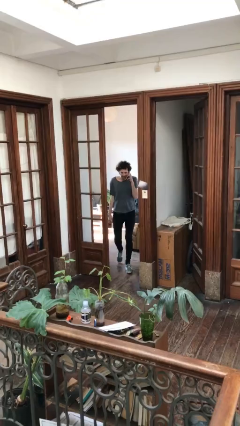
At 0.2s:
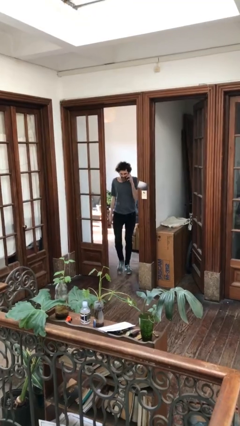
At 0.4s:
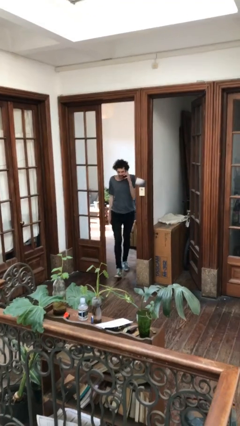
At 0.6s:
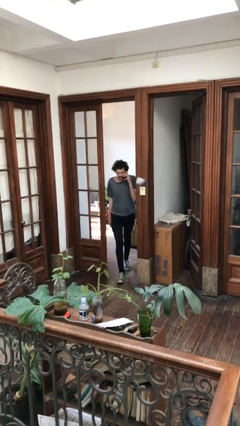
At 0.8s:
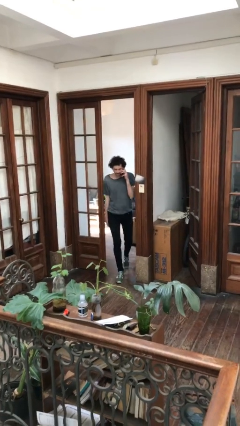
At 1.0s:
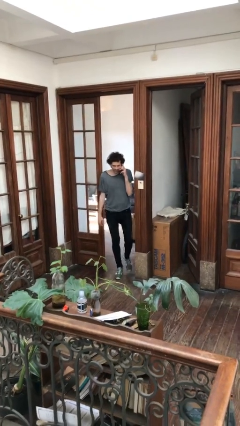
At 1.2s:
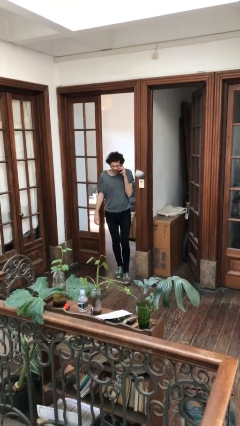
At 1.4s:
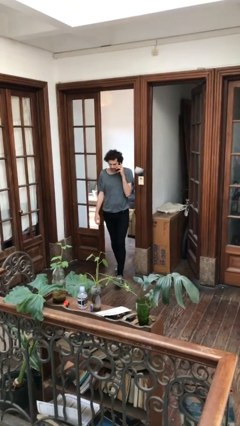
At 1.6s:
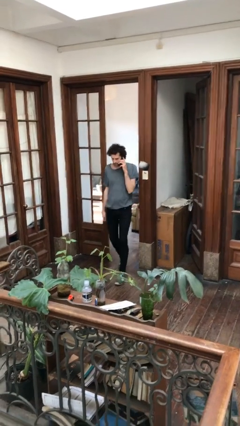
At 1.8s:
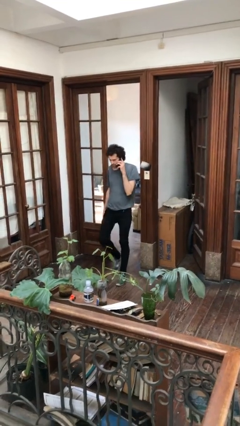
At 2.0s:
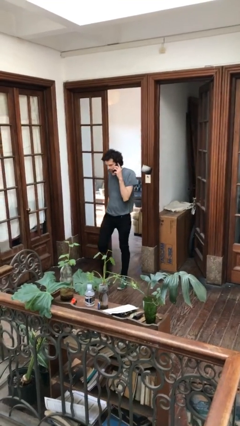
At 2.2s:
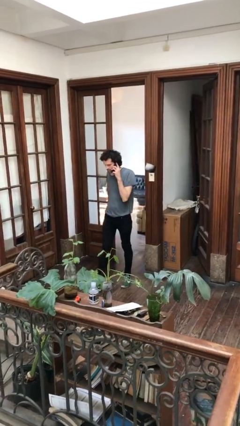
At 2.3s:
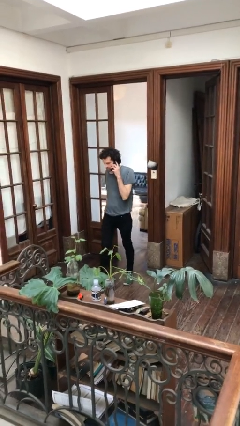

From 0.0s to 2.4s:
person enters scene through structure

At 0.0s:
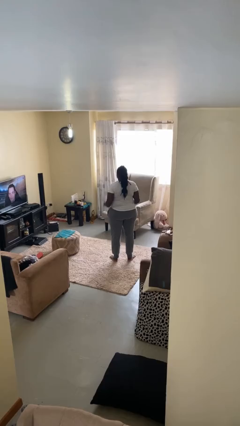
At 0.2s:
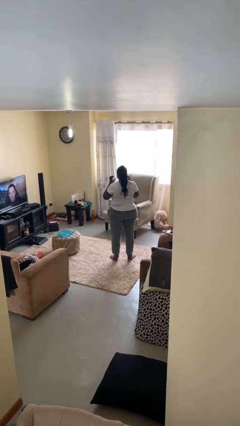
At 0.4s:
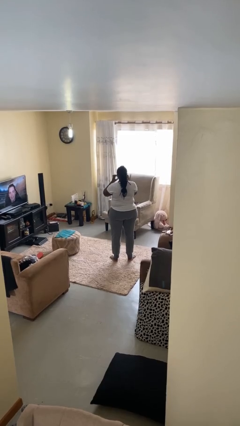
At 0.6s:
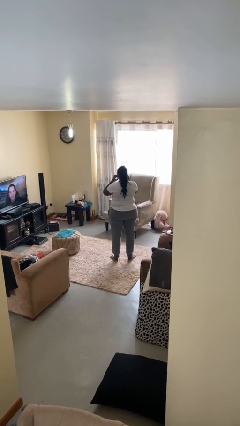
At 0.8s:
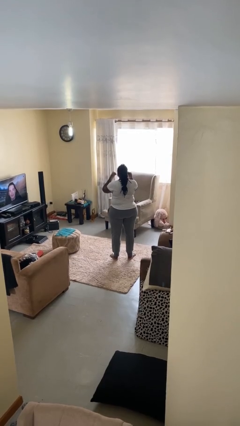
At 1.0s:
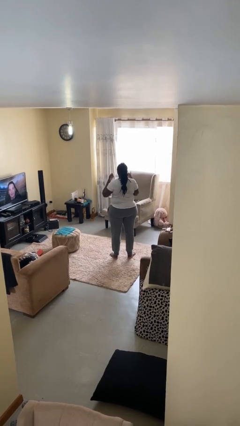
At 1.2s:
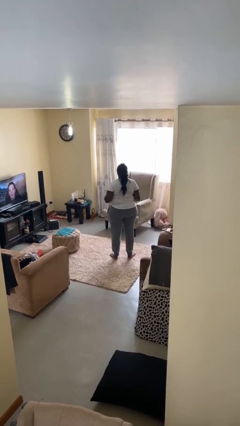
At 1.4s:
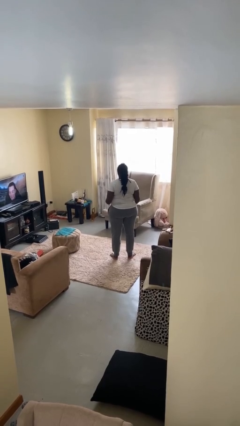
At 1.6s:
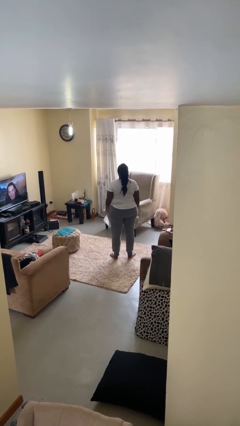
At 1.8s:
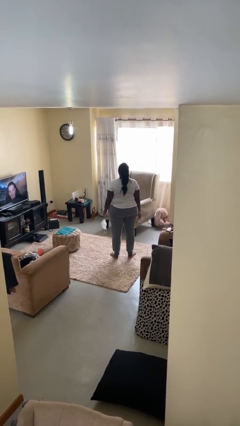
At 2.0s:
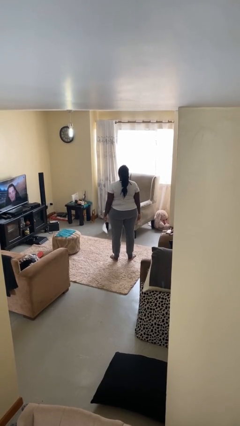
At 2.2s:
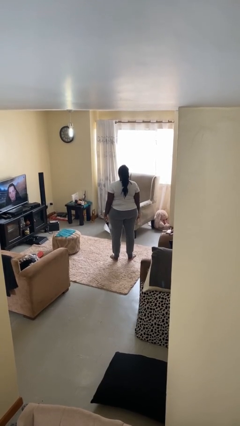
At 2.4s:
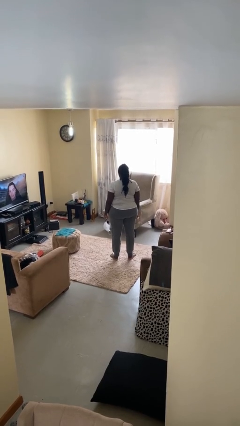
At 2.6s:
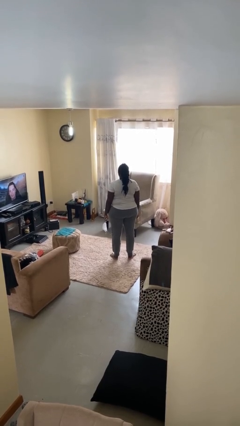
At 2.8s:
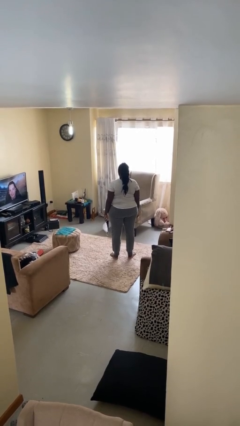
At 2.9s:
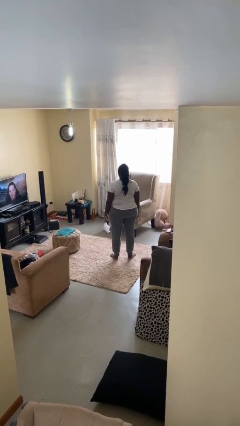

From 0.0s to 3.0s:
person takes off facemask

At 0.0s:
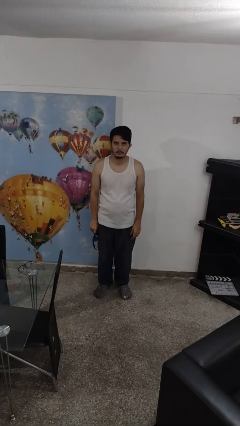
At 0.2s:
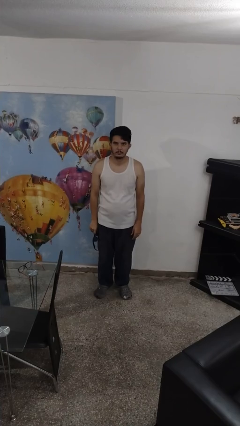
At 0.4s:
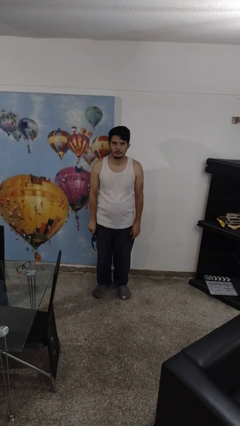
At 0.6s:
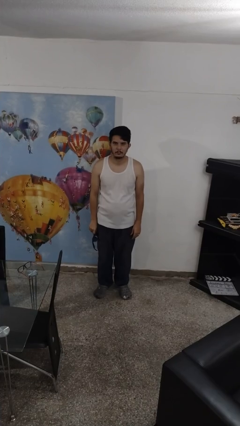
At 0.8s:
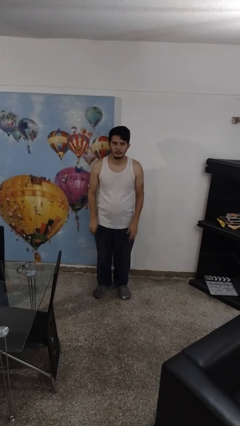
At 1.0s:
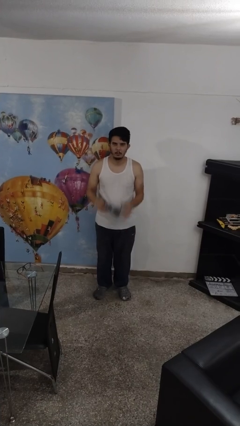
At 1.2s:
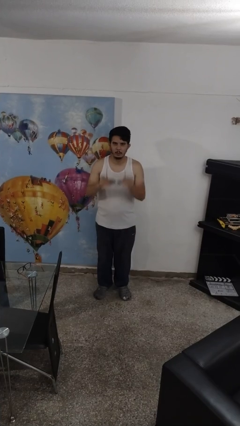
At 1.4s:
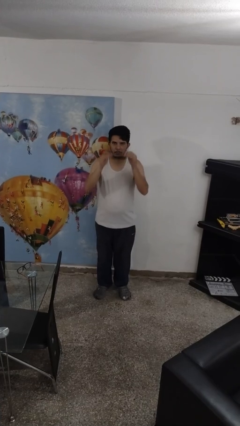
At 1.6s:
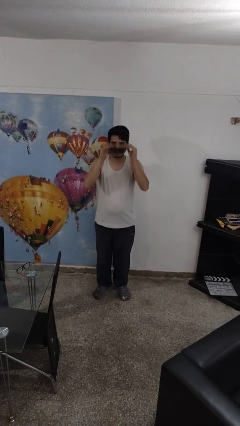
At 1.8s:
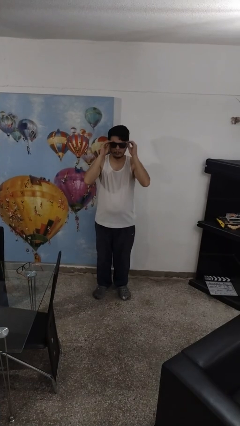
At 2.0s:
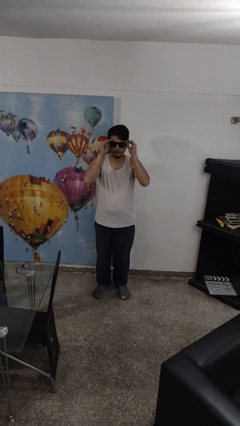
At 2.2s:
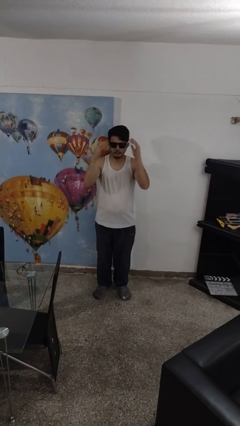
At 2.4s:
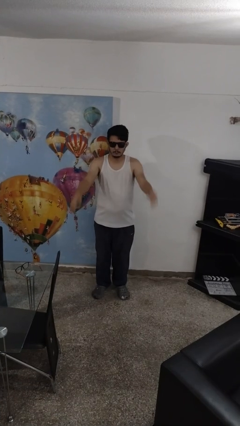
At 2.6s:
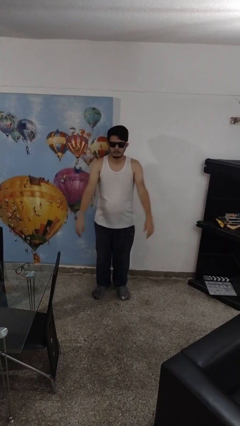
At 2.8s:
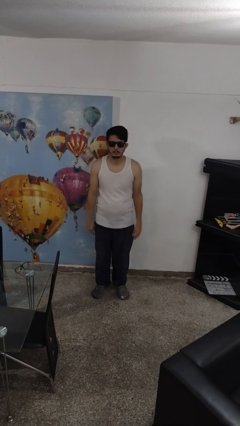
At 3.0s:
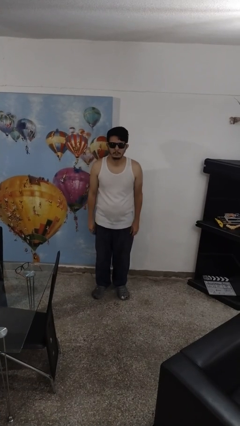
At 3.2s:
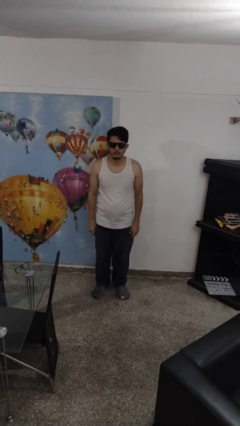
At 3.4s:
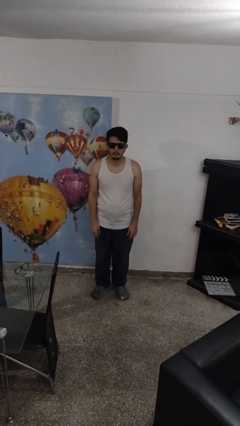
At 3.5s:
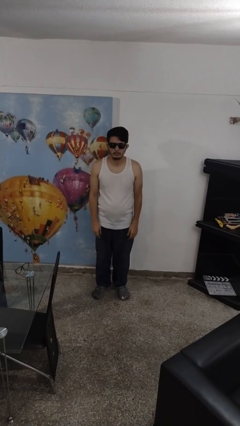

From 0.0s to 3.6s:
person puts on sunglasses

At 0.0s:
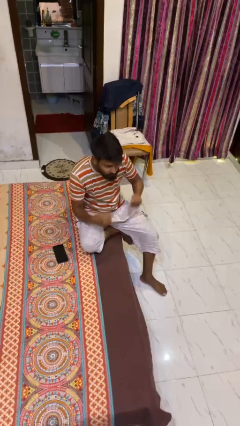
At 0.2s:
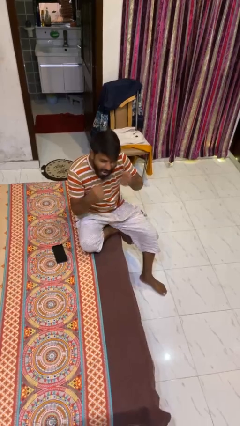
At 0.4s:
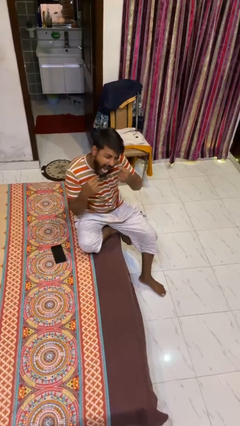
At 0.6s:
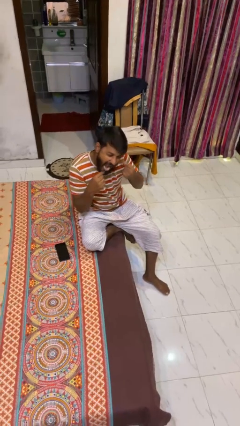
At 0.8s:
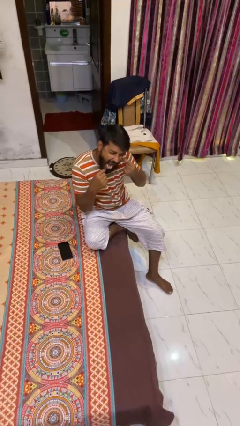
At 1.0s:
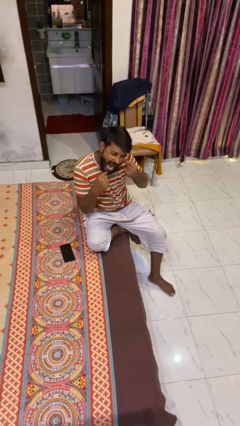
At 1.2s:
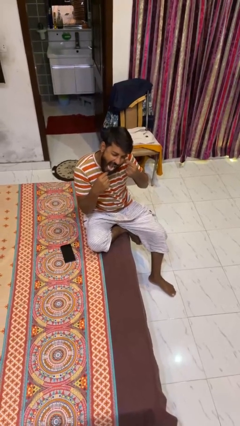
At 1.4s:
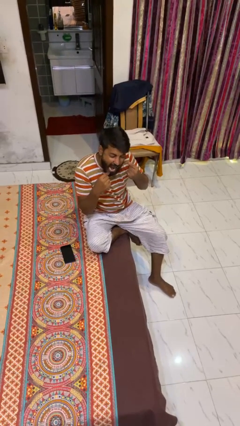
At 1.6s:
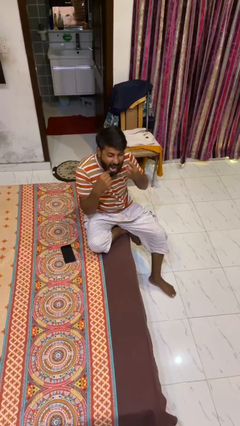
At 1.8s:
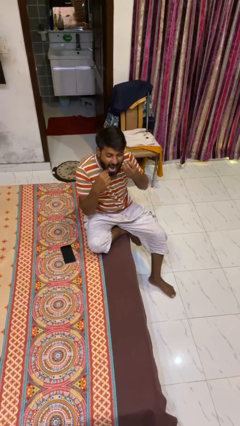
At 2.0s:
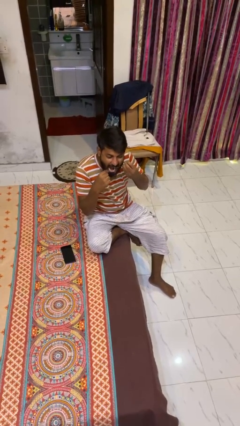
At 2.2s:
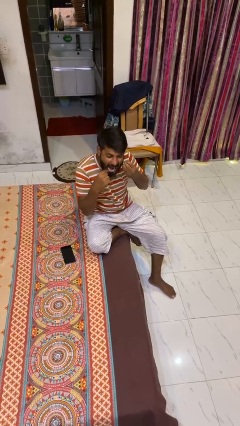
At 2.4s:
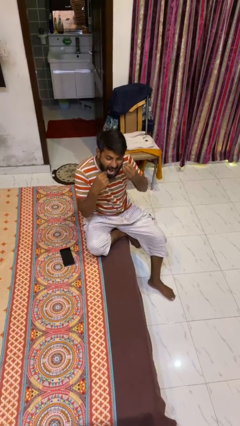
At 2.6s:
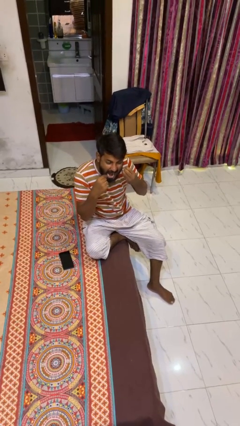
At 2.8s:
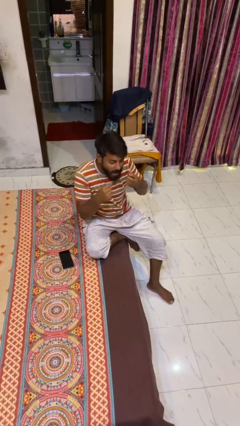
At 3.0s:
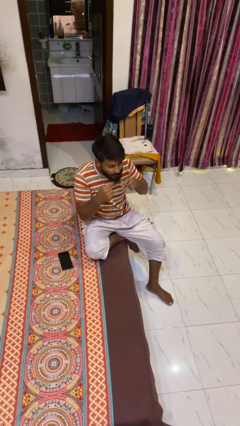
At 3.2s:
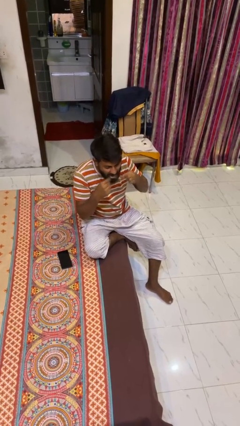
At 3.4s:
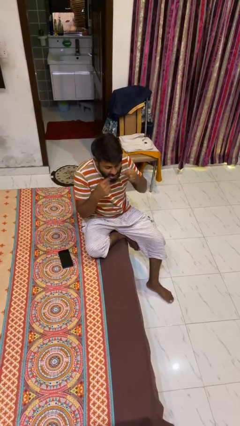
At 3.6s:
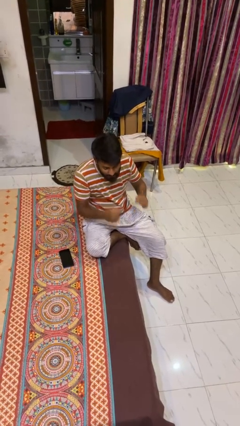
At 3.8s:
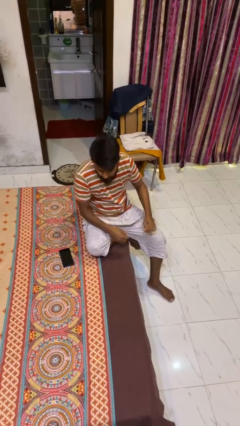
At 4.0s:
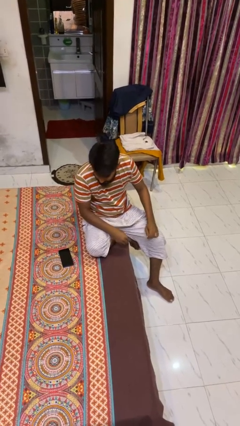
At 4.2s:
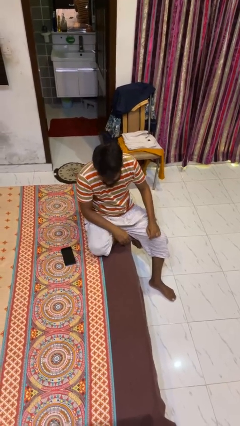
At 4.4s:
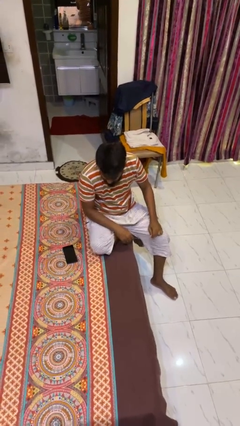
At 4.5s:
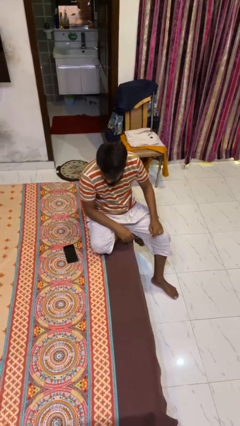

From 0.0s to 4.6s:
person flosses

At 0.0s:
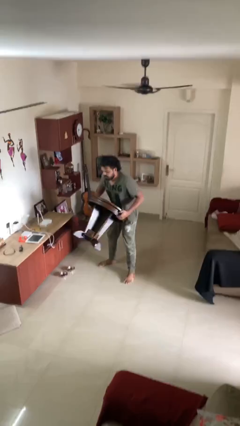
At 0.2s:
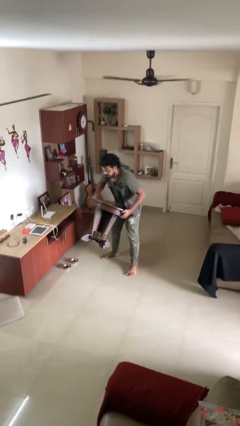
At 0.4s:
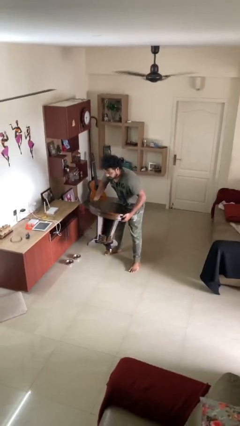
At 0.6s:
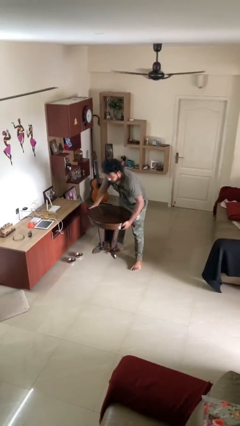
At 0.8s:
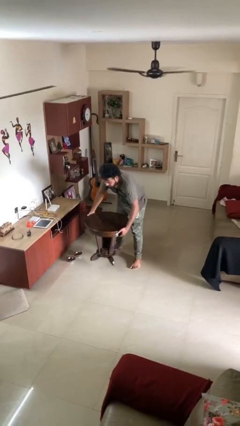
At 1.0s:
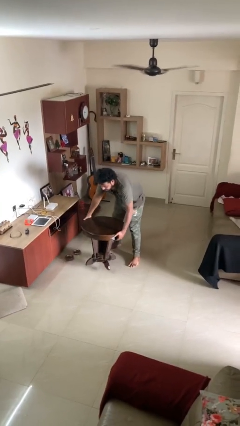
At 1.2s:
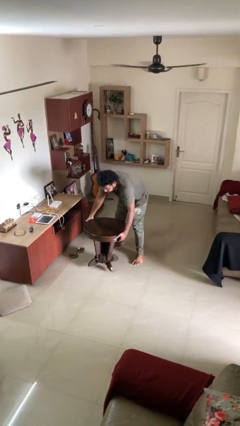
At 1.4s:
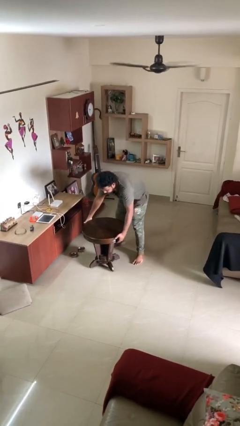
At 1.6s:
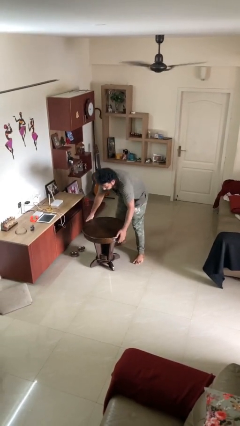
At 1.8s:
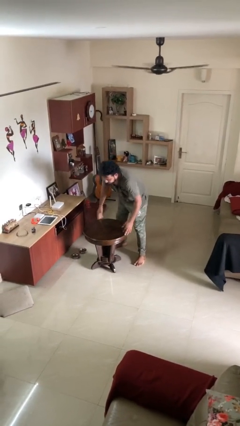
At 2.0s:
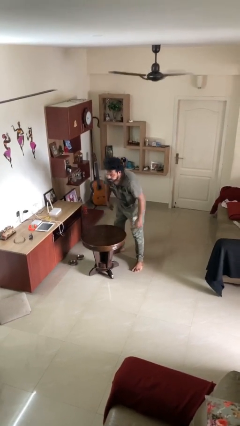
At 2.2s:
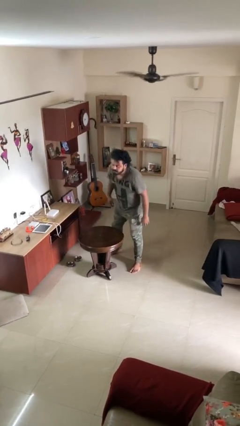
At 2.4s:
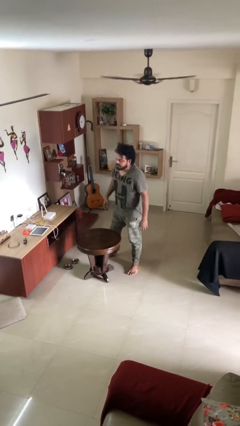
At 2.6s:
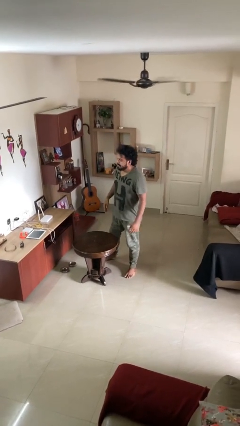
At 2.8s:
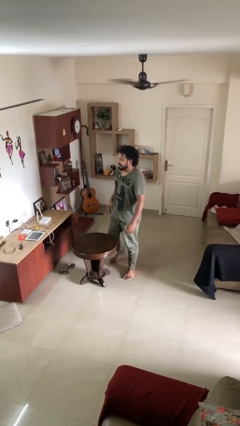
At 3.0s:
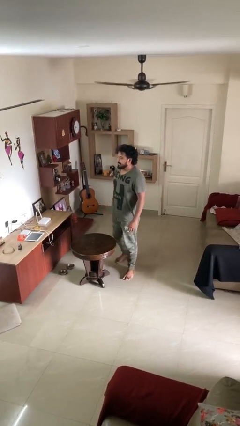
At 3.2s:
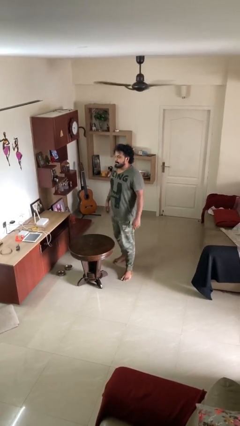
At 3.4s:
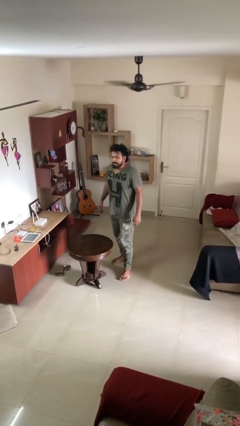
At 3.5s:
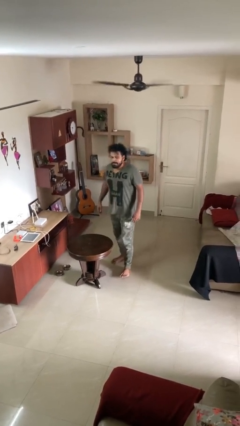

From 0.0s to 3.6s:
person puts down object on floor
